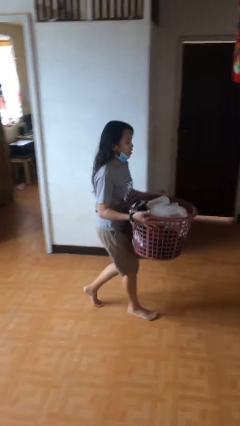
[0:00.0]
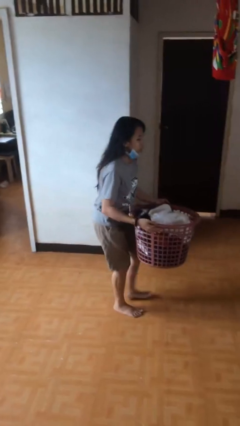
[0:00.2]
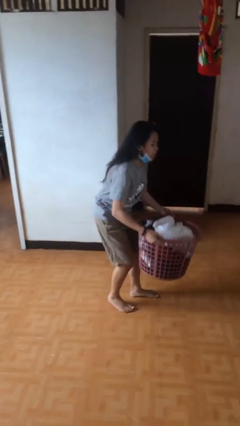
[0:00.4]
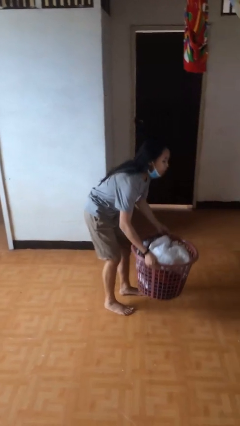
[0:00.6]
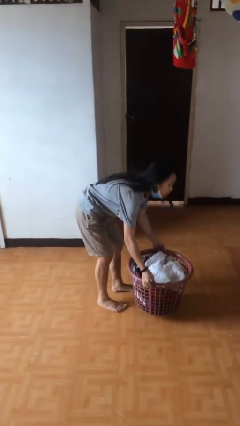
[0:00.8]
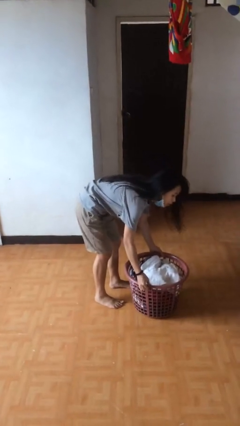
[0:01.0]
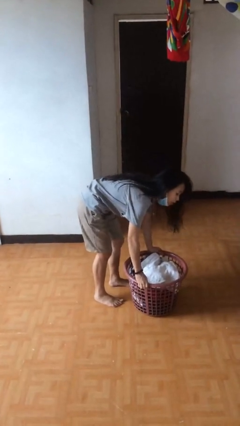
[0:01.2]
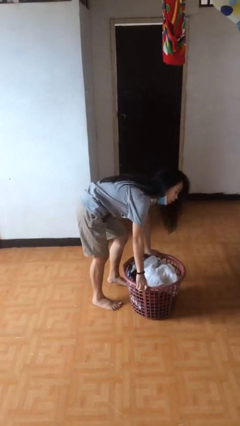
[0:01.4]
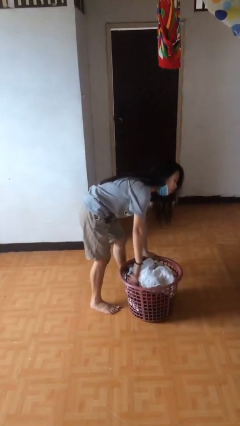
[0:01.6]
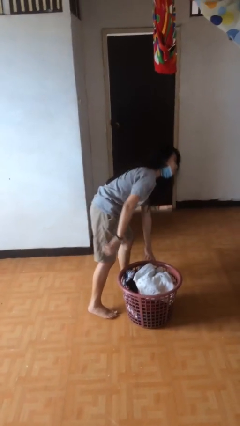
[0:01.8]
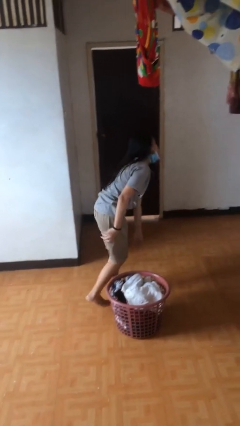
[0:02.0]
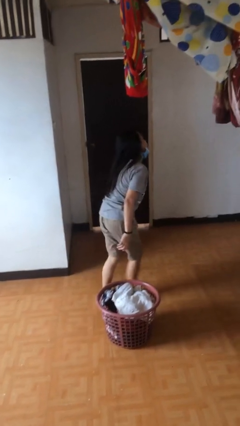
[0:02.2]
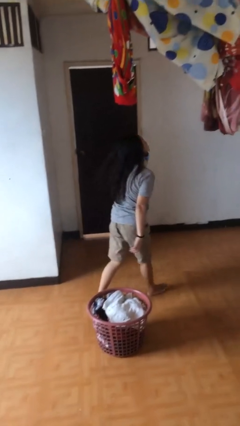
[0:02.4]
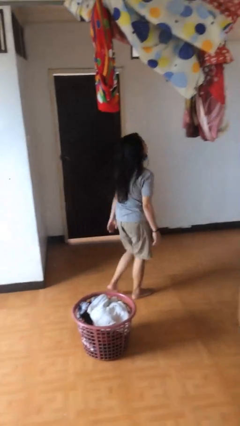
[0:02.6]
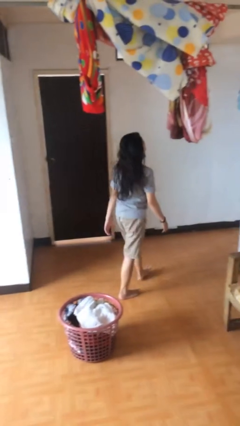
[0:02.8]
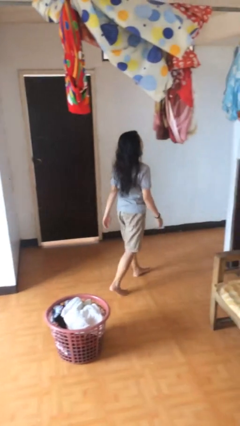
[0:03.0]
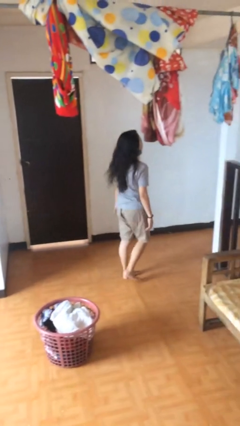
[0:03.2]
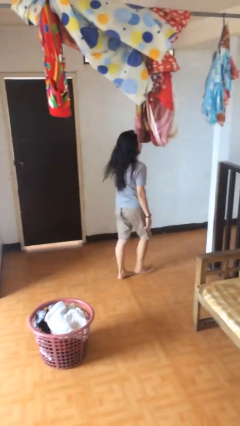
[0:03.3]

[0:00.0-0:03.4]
person puts down object on floor

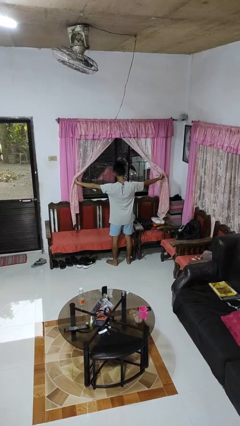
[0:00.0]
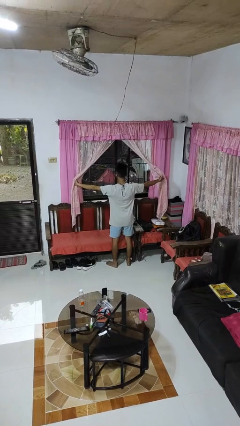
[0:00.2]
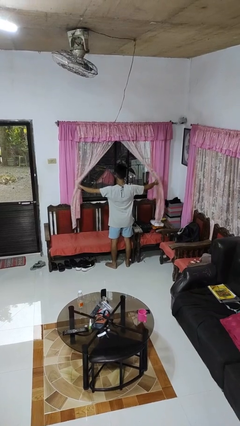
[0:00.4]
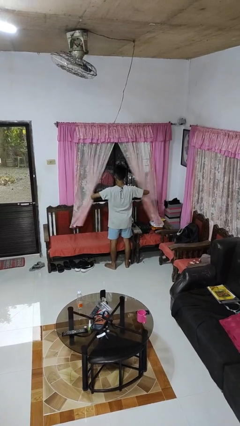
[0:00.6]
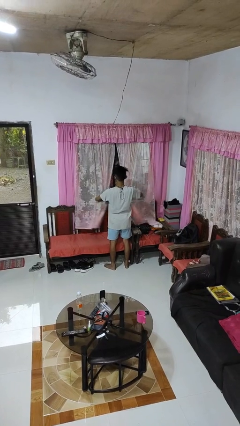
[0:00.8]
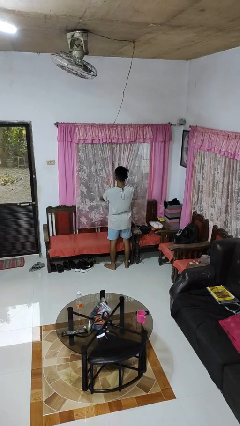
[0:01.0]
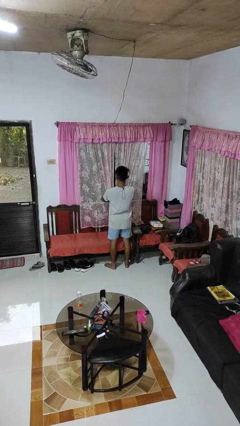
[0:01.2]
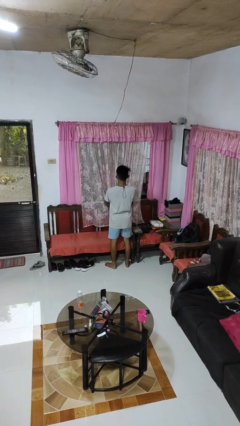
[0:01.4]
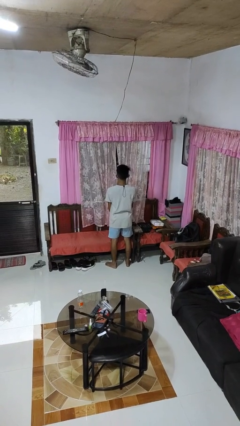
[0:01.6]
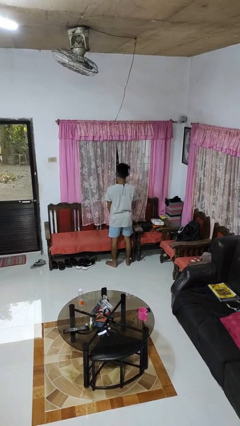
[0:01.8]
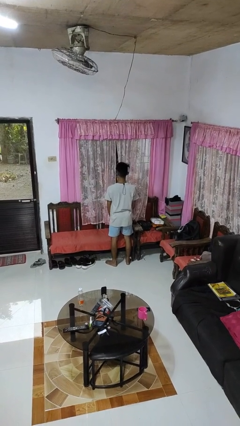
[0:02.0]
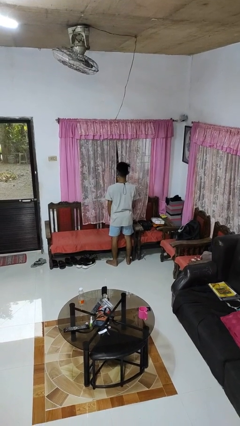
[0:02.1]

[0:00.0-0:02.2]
person closes curtains

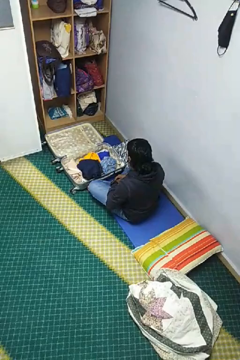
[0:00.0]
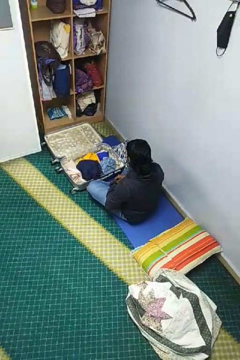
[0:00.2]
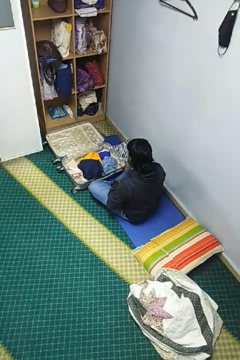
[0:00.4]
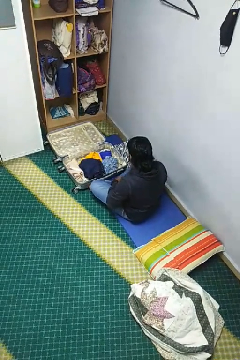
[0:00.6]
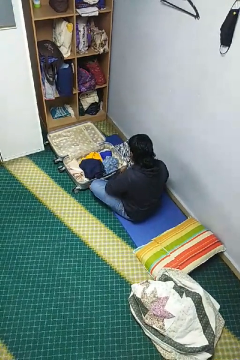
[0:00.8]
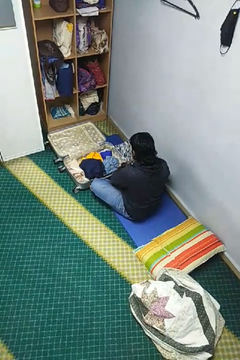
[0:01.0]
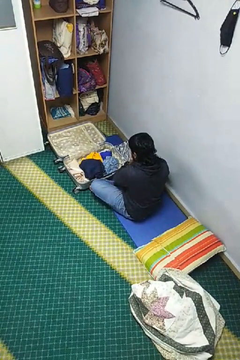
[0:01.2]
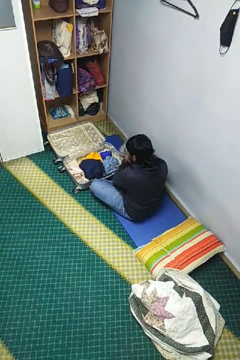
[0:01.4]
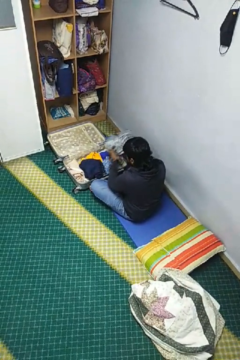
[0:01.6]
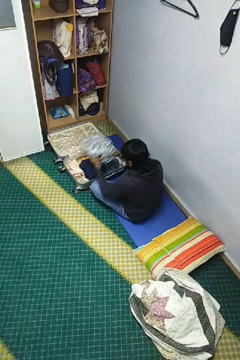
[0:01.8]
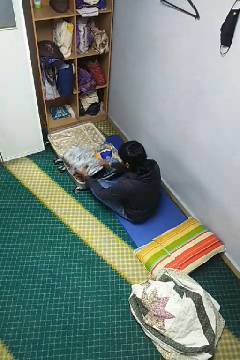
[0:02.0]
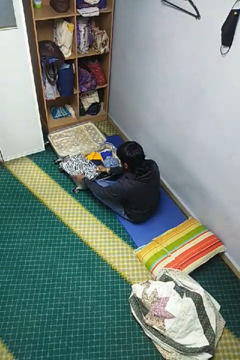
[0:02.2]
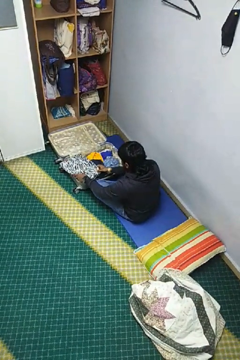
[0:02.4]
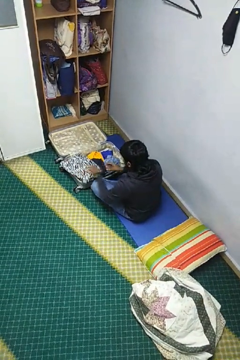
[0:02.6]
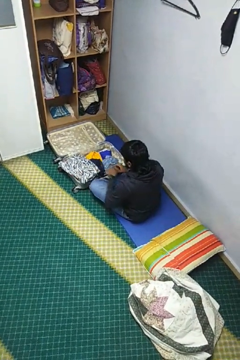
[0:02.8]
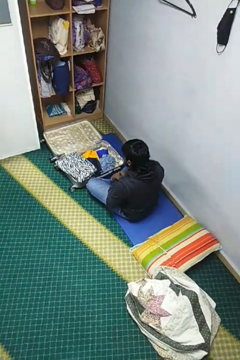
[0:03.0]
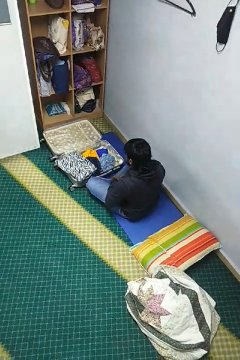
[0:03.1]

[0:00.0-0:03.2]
person loads clothes into suitcase

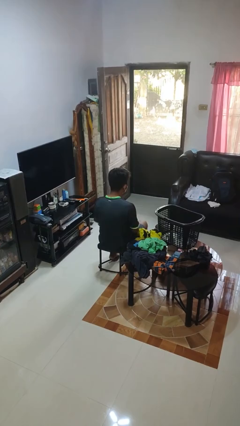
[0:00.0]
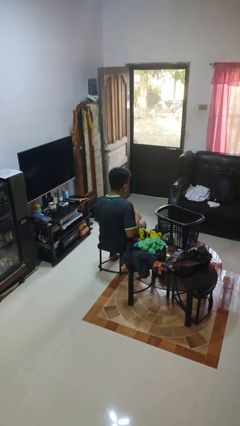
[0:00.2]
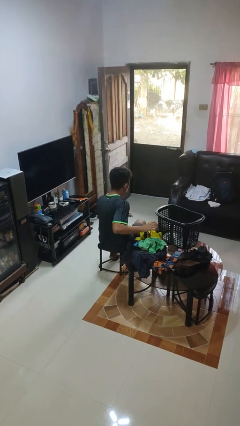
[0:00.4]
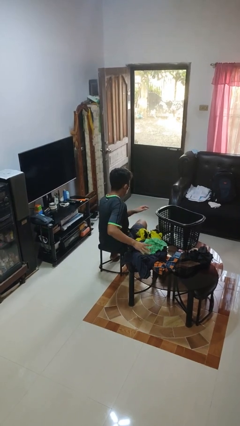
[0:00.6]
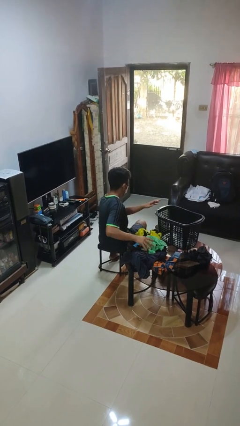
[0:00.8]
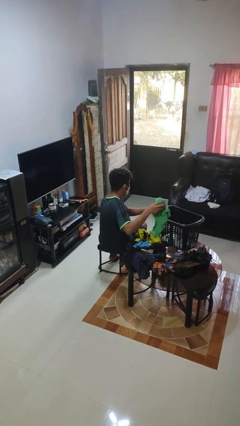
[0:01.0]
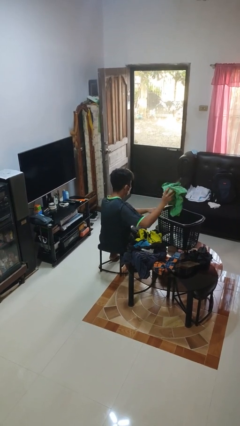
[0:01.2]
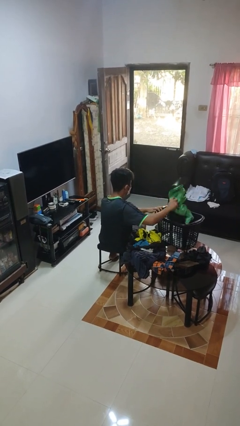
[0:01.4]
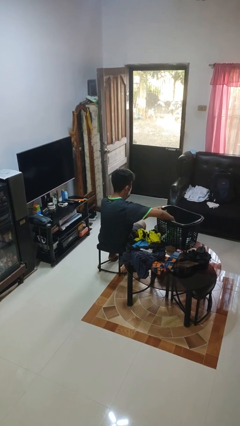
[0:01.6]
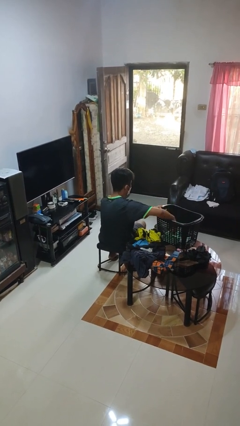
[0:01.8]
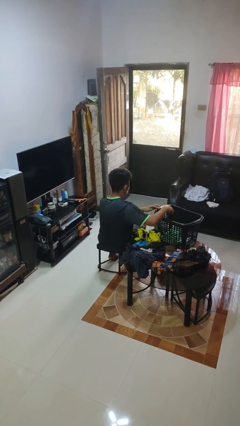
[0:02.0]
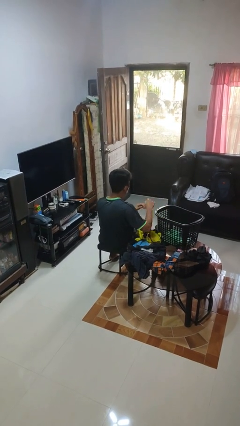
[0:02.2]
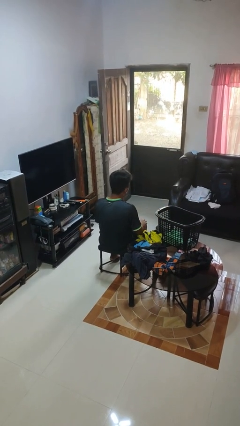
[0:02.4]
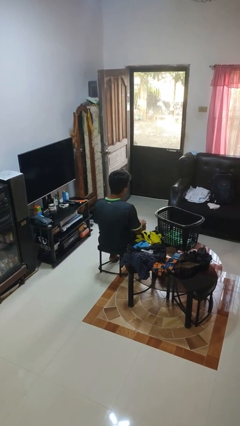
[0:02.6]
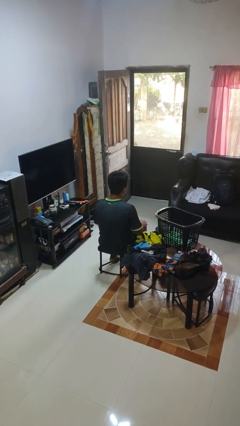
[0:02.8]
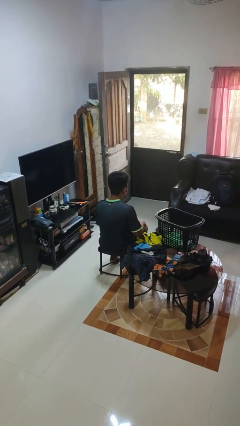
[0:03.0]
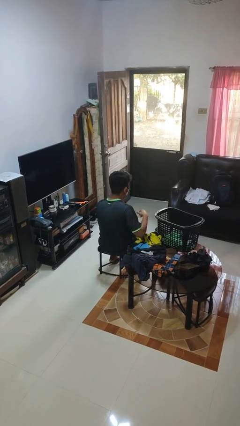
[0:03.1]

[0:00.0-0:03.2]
person puts object into basket

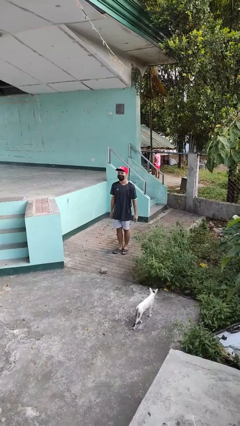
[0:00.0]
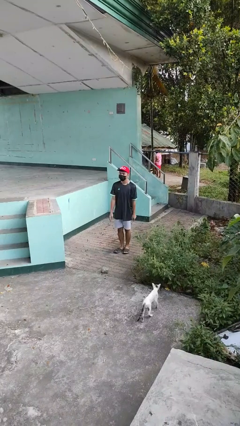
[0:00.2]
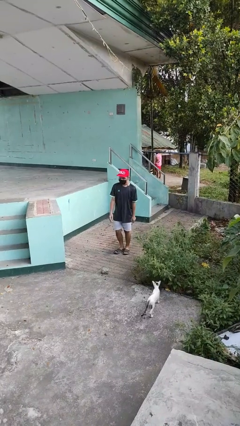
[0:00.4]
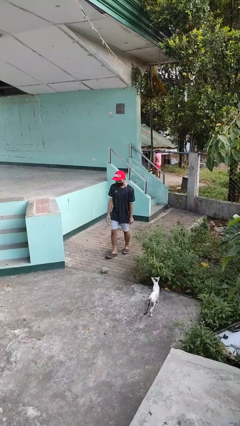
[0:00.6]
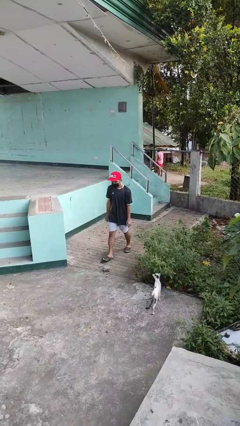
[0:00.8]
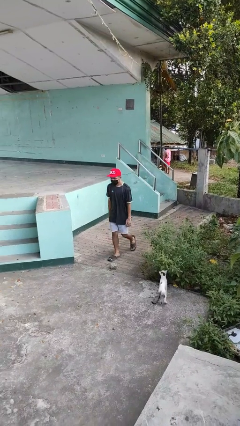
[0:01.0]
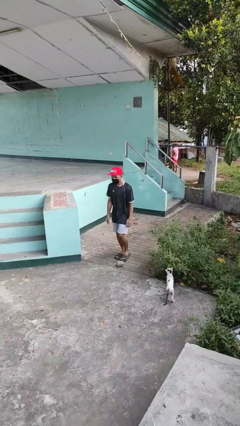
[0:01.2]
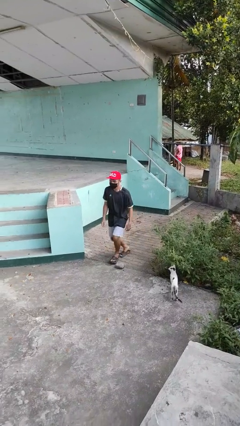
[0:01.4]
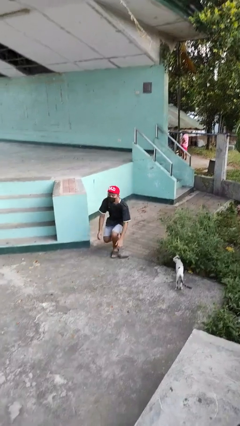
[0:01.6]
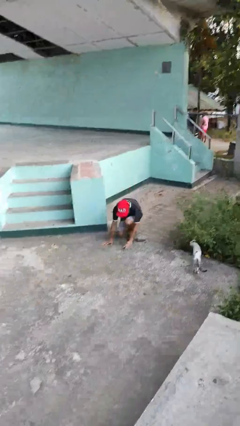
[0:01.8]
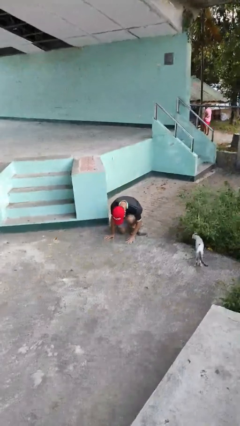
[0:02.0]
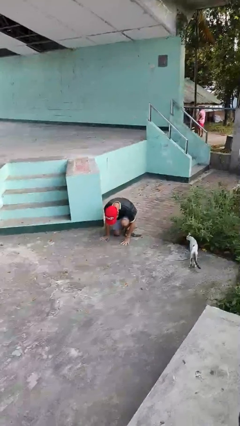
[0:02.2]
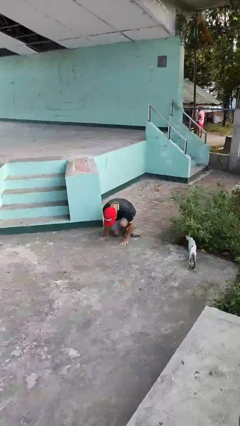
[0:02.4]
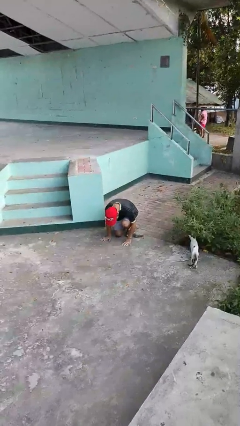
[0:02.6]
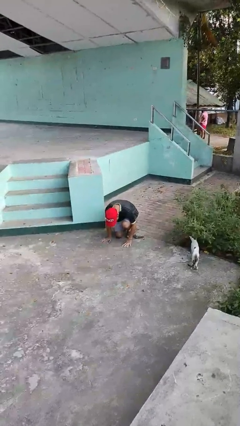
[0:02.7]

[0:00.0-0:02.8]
person trips on object on floor

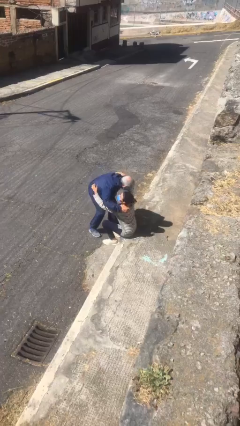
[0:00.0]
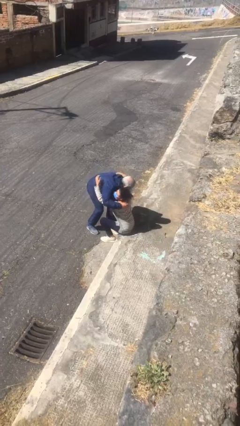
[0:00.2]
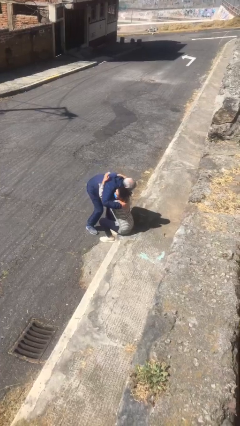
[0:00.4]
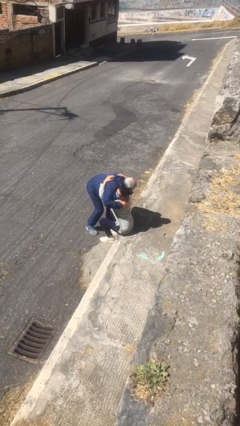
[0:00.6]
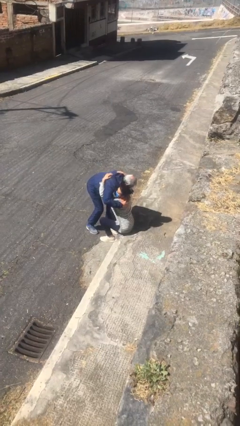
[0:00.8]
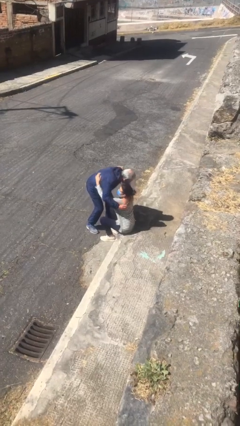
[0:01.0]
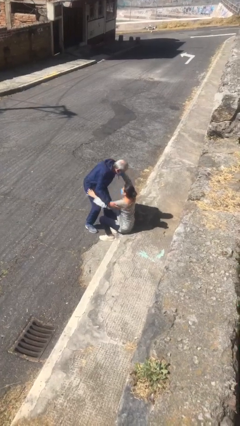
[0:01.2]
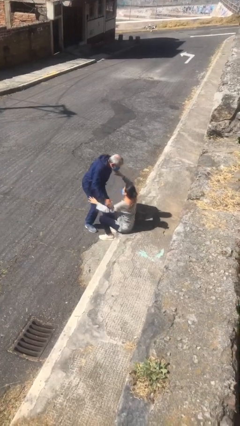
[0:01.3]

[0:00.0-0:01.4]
person embraces person

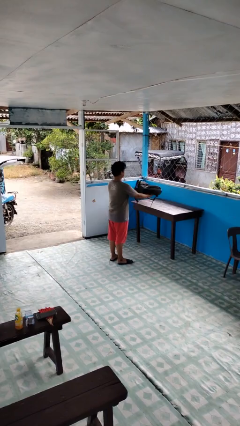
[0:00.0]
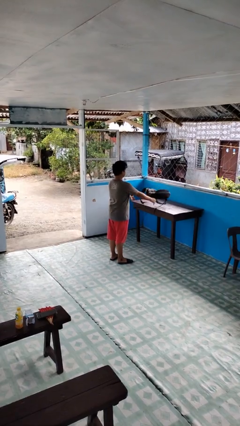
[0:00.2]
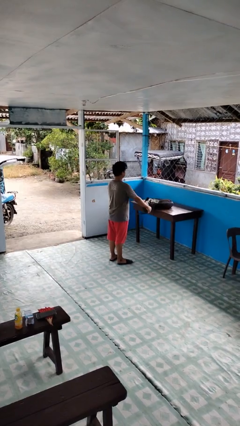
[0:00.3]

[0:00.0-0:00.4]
person throws object on table

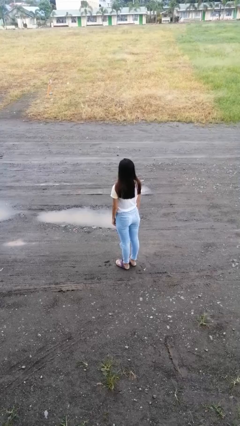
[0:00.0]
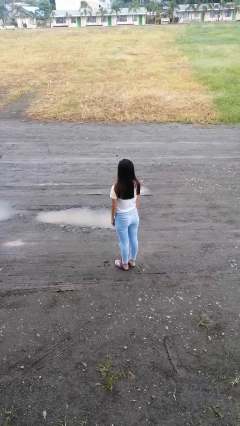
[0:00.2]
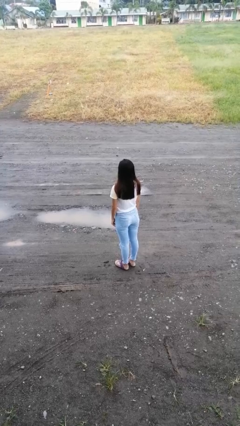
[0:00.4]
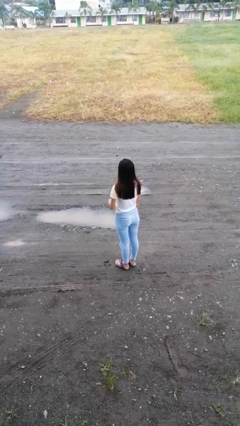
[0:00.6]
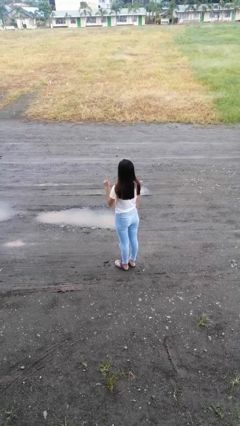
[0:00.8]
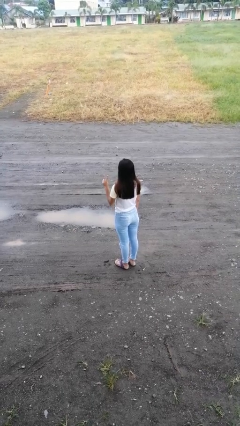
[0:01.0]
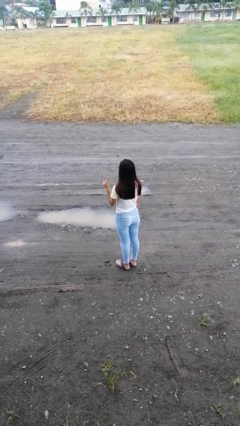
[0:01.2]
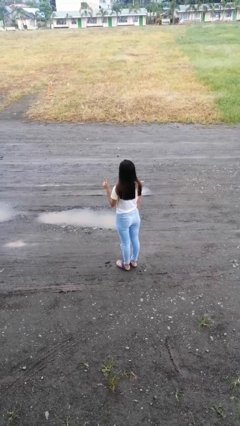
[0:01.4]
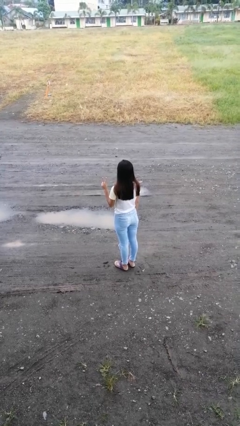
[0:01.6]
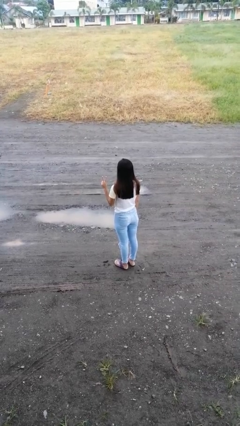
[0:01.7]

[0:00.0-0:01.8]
person gestures peace
